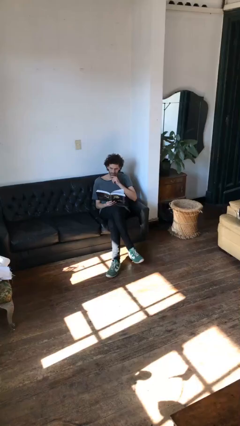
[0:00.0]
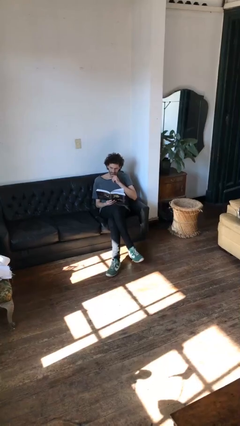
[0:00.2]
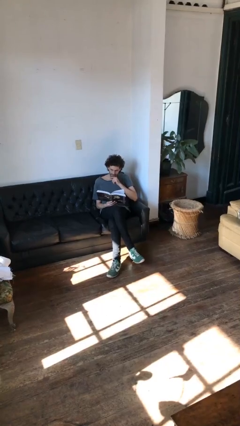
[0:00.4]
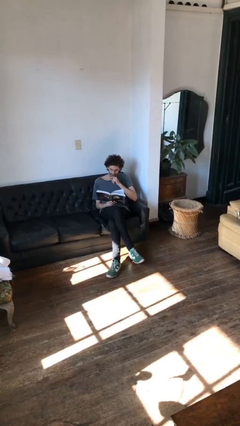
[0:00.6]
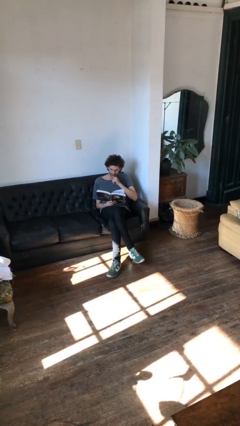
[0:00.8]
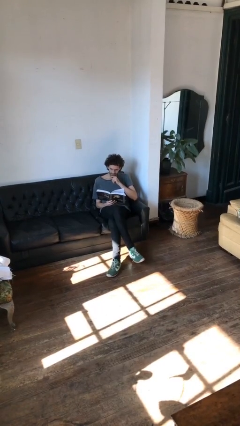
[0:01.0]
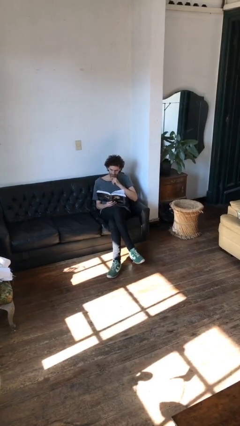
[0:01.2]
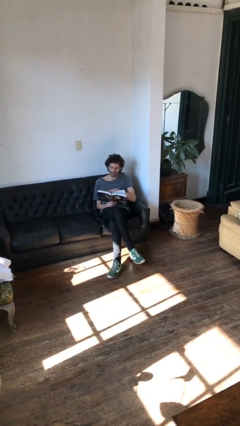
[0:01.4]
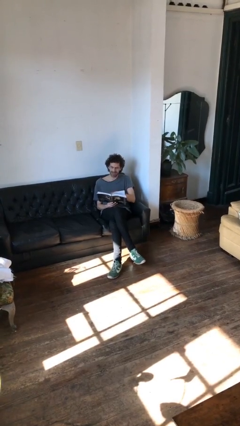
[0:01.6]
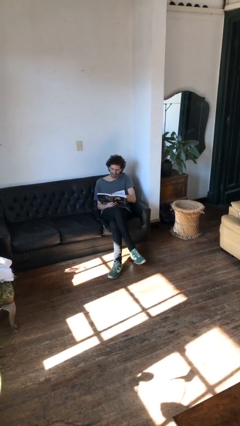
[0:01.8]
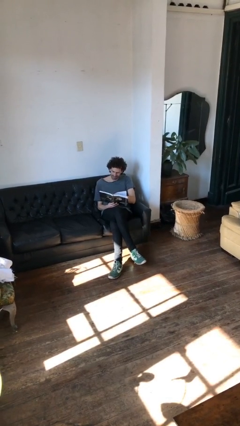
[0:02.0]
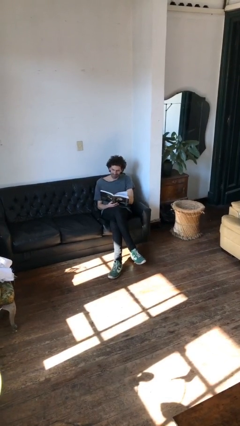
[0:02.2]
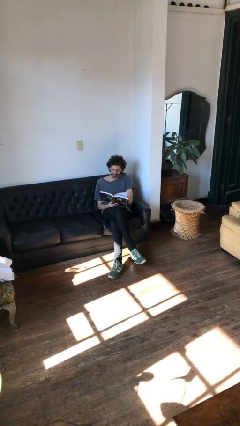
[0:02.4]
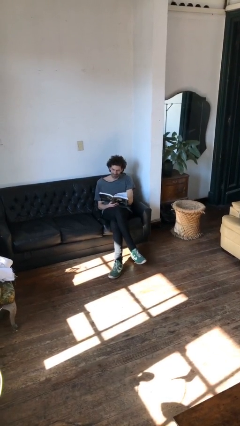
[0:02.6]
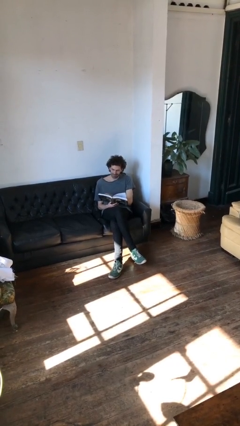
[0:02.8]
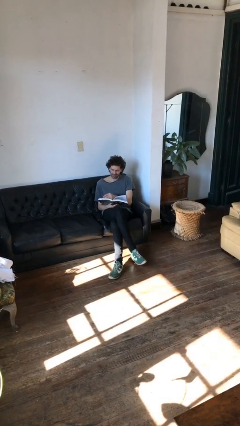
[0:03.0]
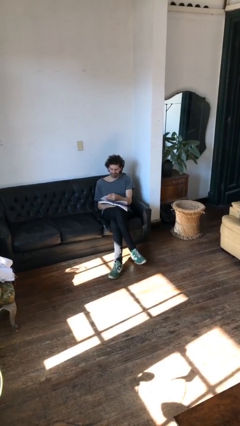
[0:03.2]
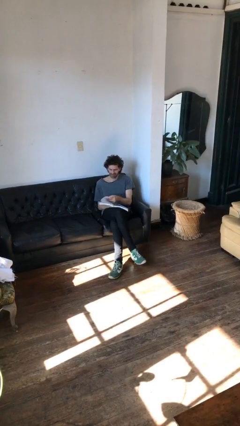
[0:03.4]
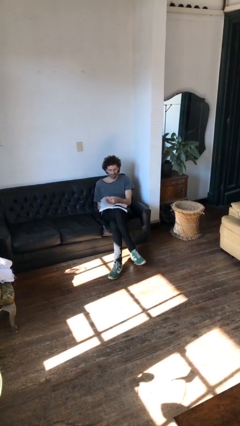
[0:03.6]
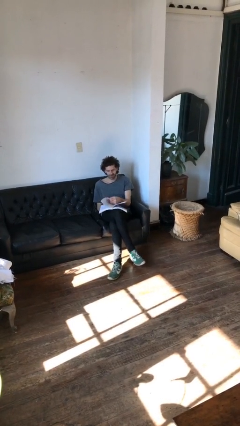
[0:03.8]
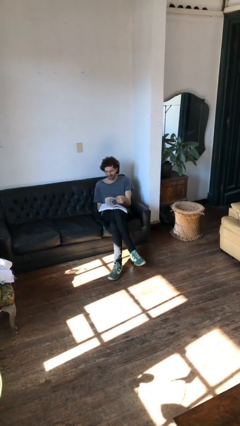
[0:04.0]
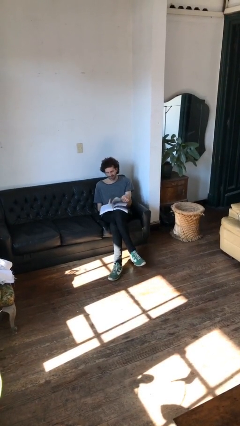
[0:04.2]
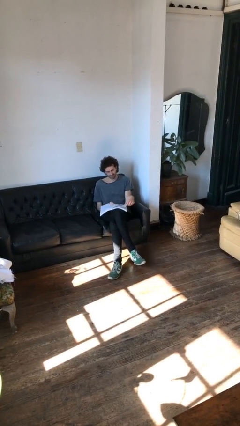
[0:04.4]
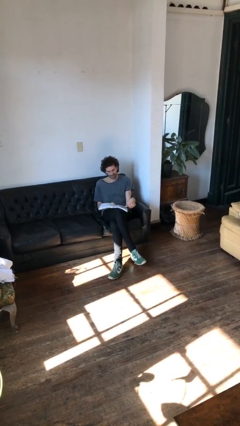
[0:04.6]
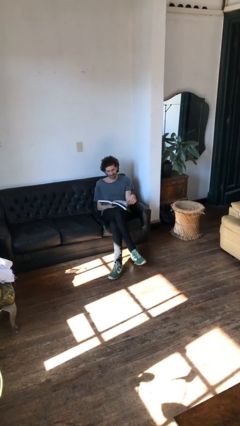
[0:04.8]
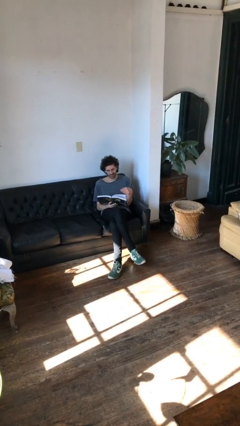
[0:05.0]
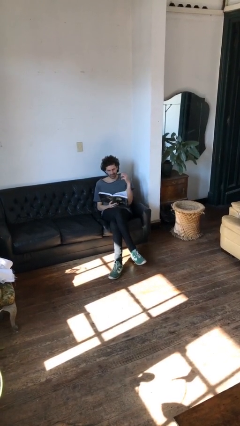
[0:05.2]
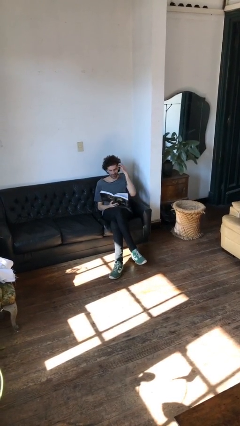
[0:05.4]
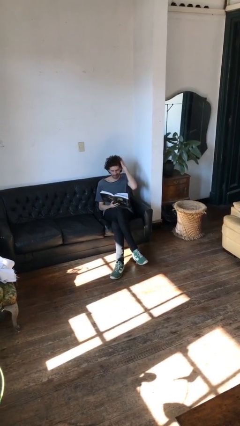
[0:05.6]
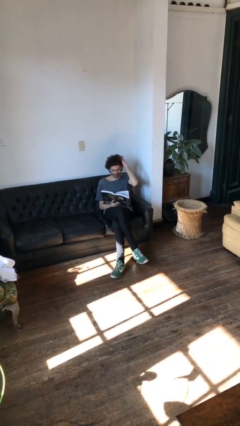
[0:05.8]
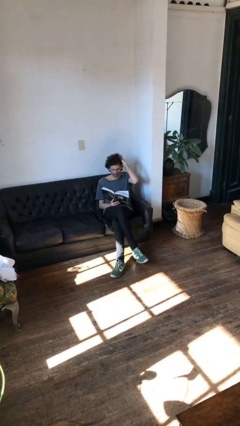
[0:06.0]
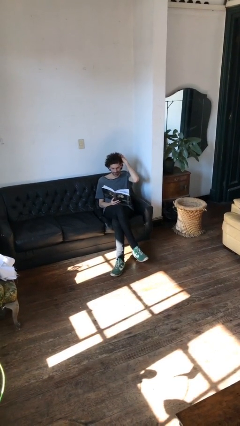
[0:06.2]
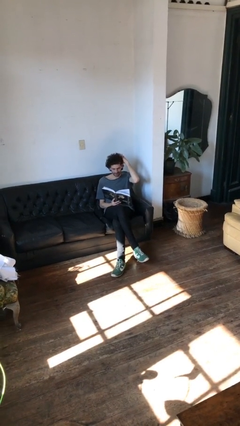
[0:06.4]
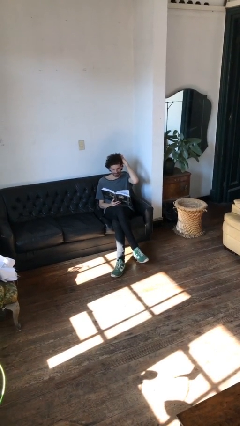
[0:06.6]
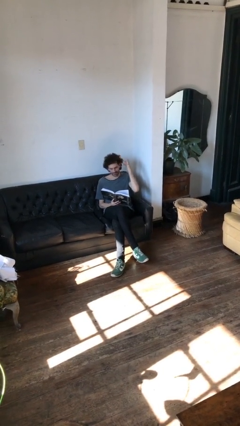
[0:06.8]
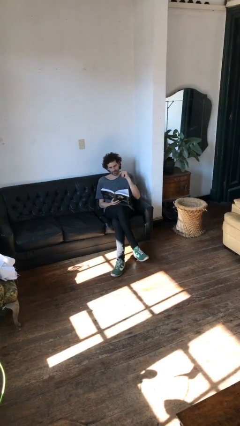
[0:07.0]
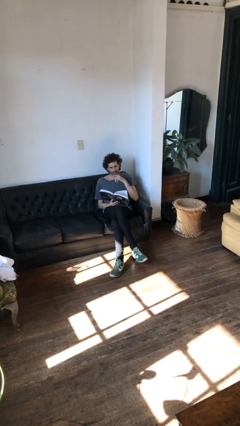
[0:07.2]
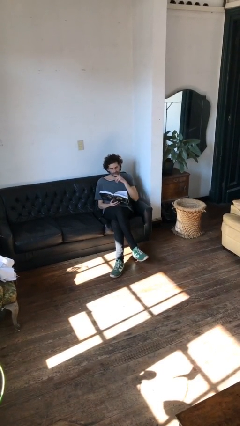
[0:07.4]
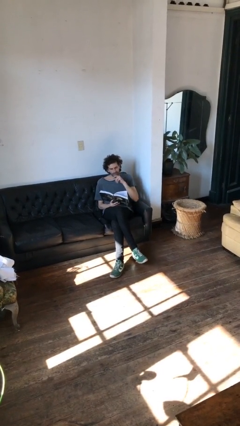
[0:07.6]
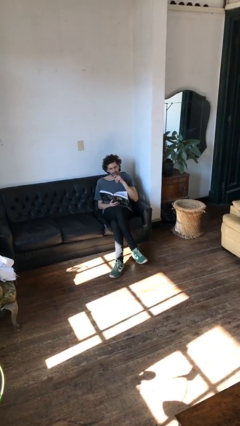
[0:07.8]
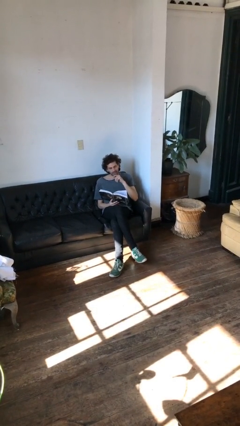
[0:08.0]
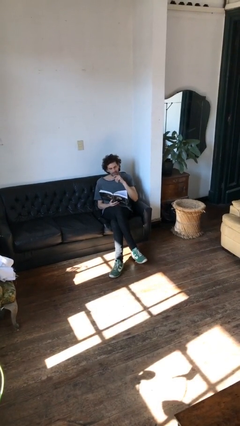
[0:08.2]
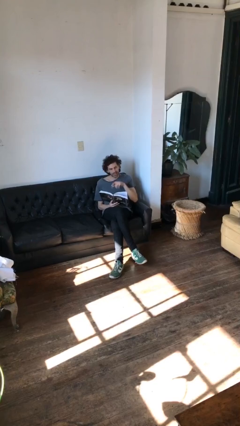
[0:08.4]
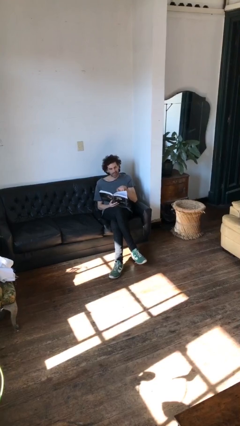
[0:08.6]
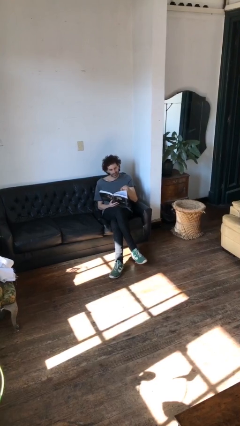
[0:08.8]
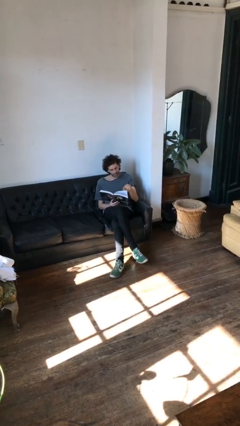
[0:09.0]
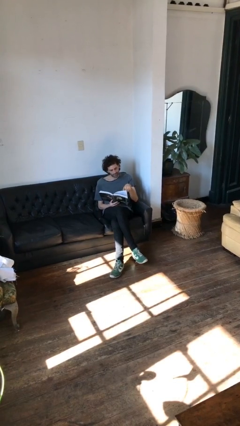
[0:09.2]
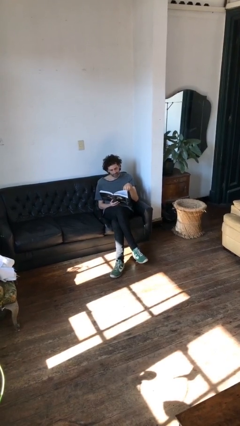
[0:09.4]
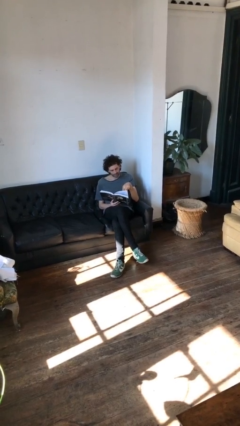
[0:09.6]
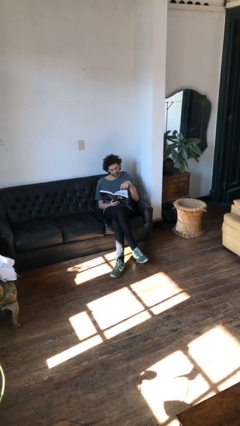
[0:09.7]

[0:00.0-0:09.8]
person reads document

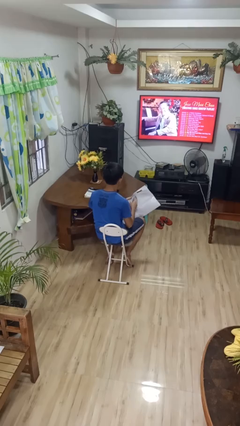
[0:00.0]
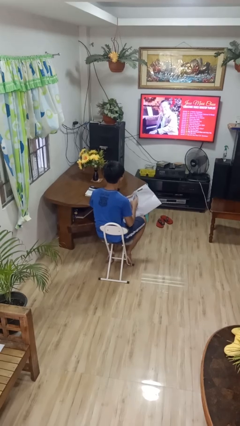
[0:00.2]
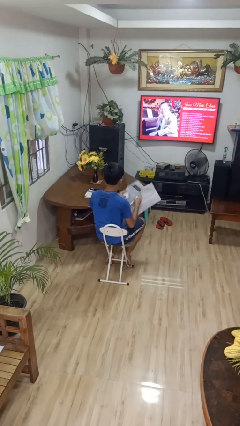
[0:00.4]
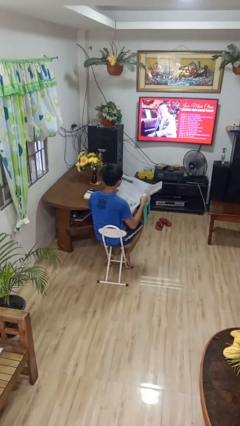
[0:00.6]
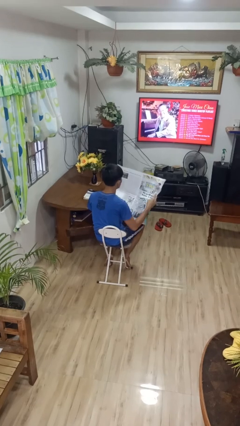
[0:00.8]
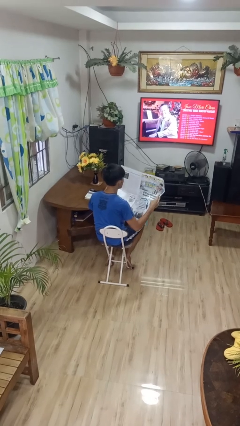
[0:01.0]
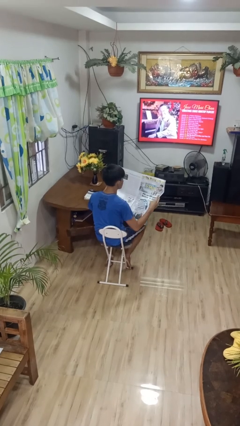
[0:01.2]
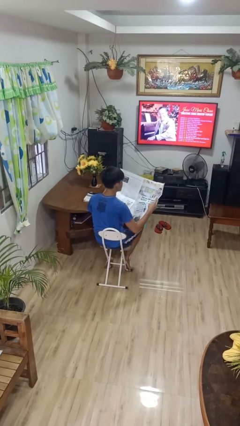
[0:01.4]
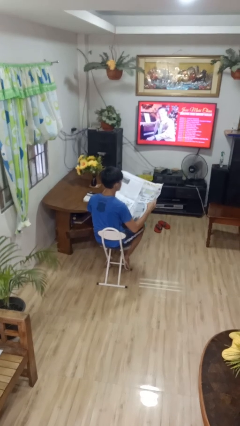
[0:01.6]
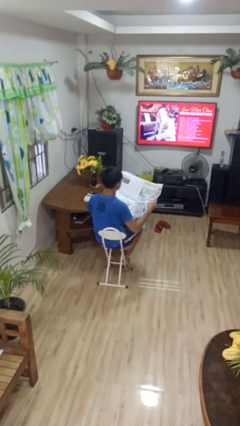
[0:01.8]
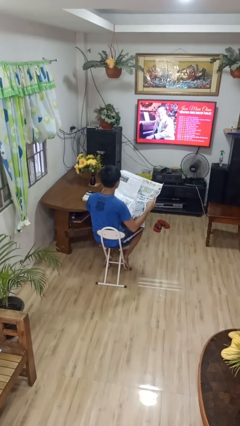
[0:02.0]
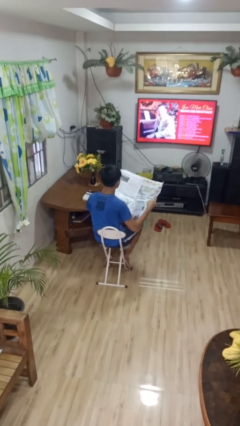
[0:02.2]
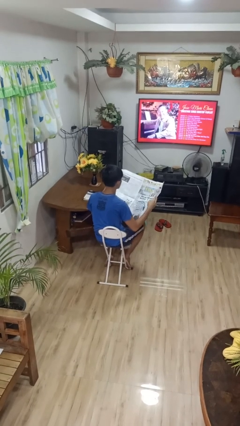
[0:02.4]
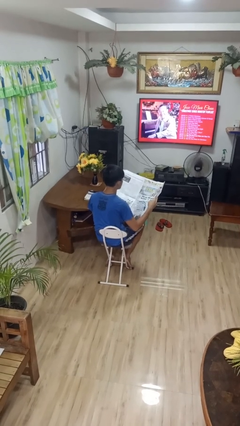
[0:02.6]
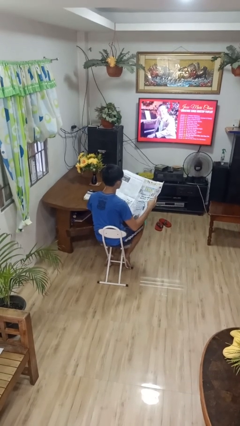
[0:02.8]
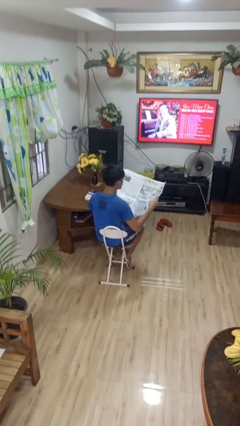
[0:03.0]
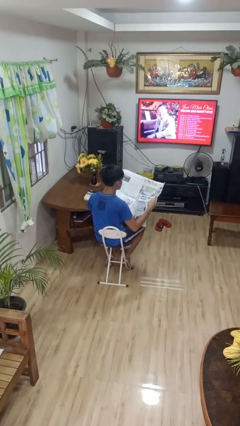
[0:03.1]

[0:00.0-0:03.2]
person reads newspaper

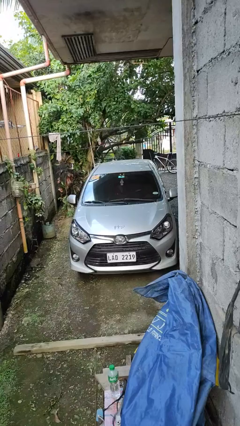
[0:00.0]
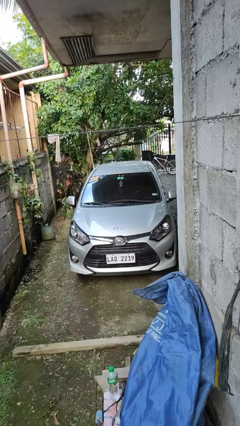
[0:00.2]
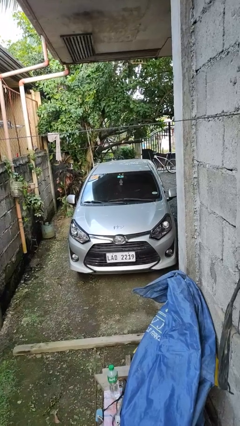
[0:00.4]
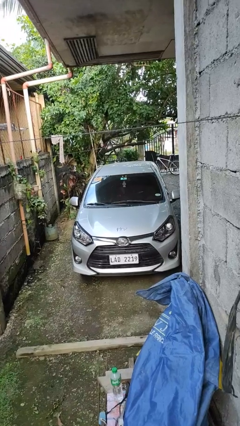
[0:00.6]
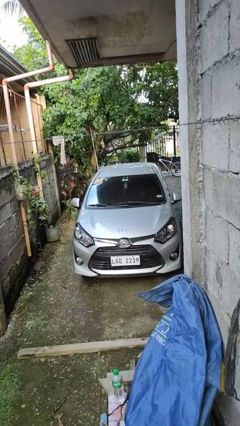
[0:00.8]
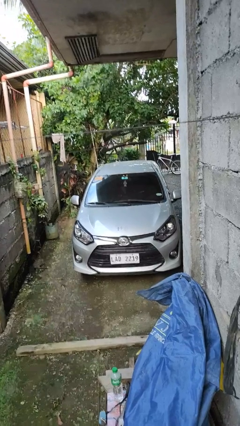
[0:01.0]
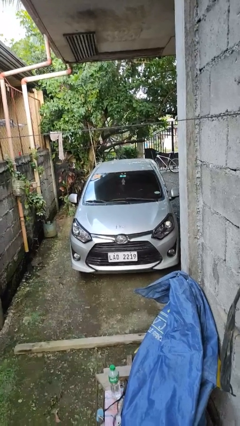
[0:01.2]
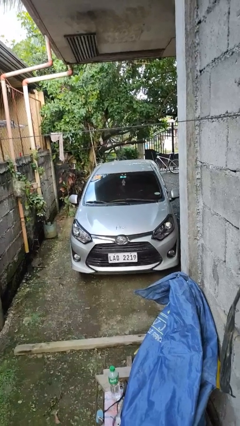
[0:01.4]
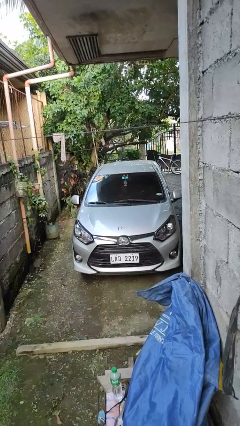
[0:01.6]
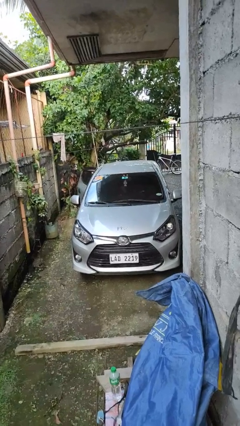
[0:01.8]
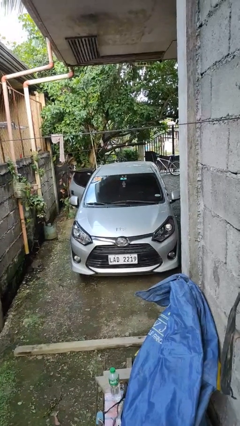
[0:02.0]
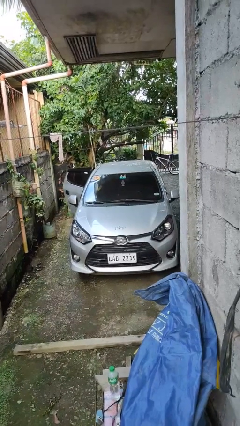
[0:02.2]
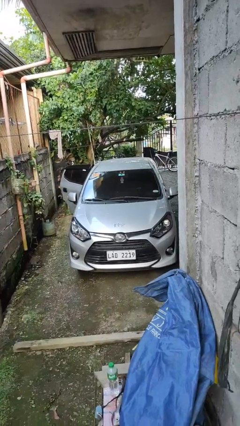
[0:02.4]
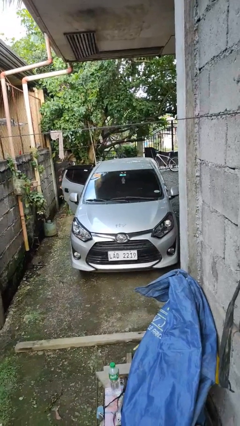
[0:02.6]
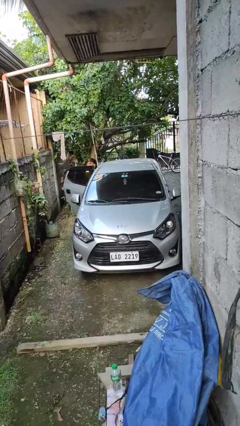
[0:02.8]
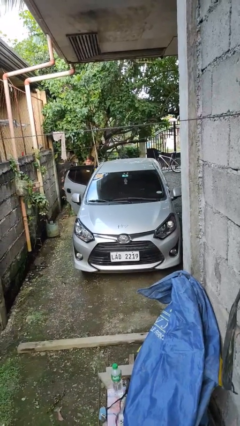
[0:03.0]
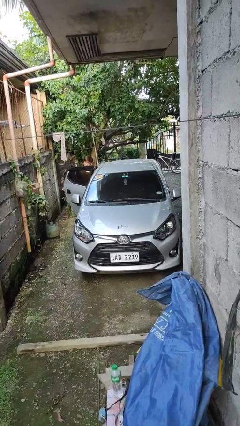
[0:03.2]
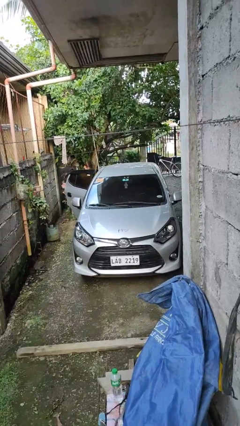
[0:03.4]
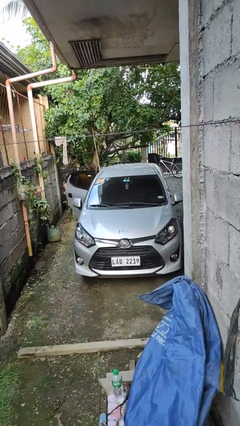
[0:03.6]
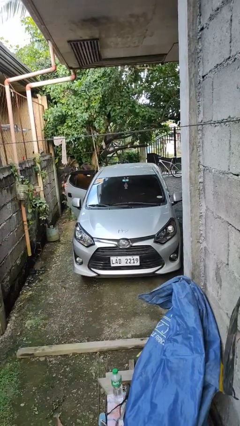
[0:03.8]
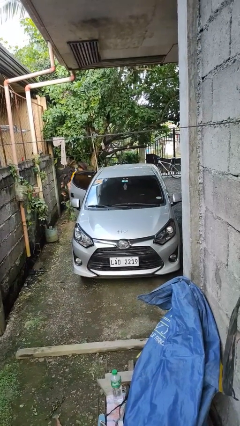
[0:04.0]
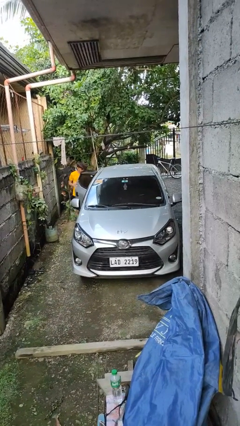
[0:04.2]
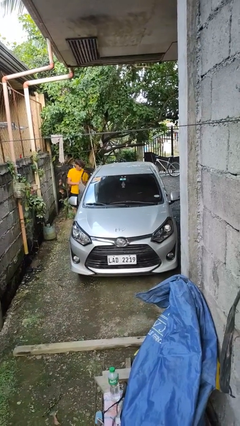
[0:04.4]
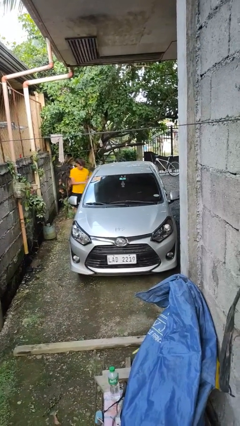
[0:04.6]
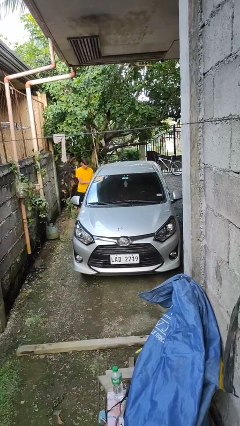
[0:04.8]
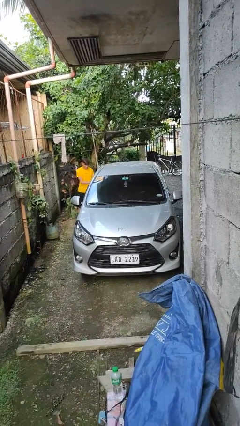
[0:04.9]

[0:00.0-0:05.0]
car drops off person
